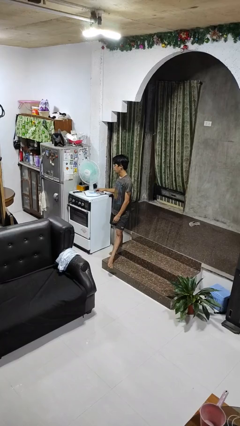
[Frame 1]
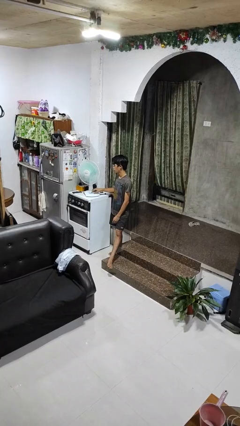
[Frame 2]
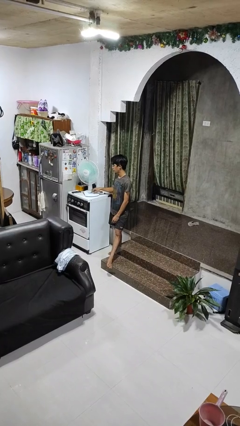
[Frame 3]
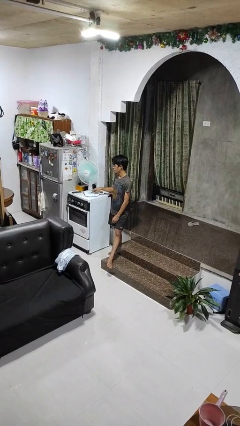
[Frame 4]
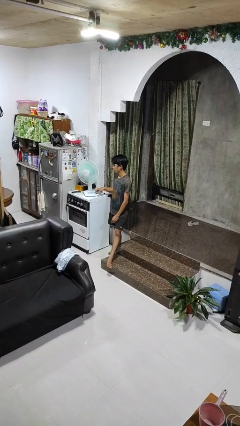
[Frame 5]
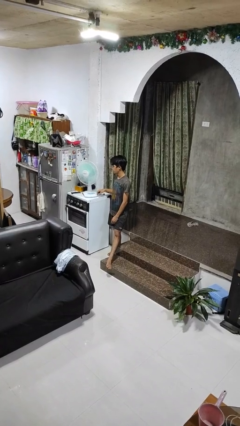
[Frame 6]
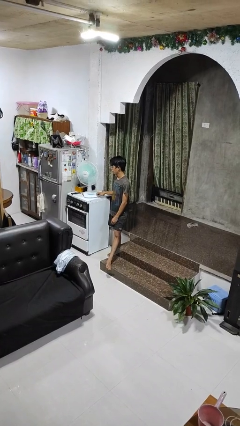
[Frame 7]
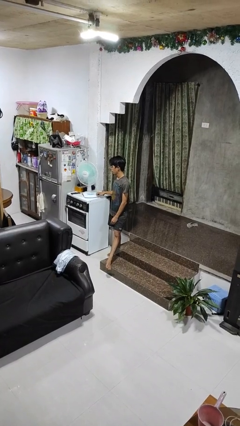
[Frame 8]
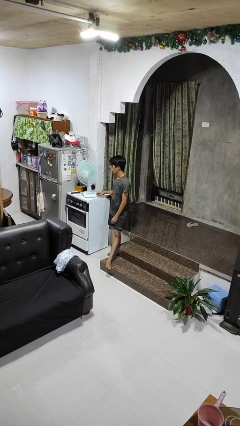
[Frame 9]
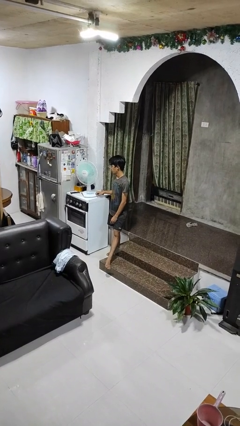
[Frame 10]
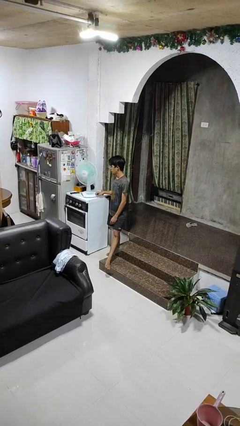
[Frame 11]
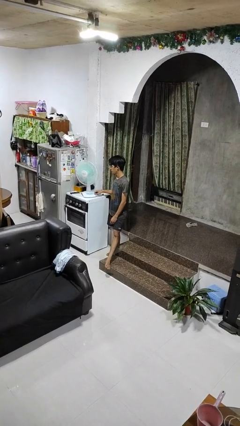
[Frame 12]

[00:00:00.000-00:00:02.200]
person turns on fan

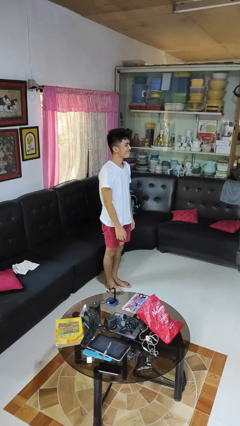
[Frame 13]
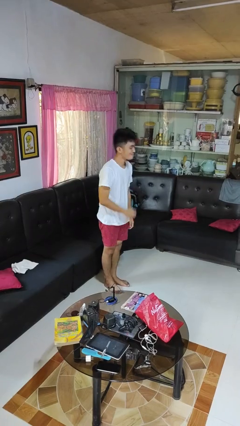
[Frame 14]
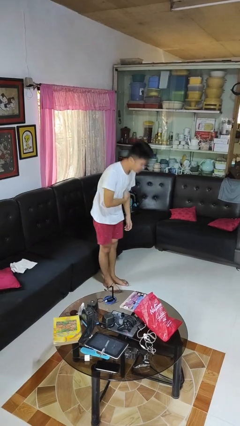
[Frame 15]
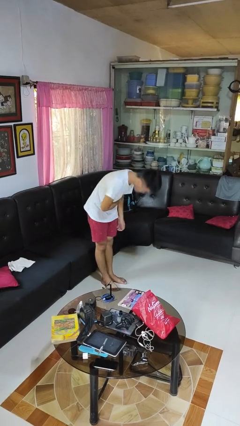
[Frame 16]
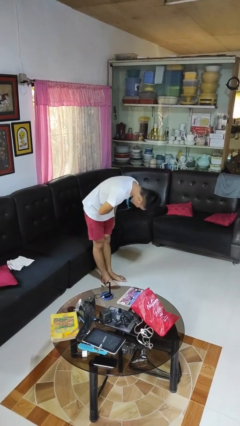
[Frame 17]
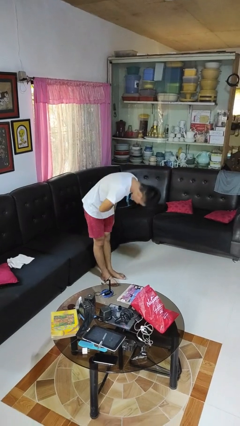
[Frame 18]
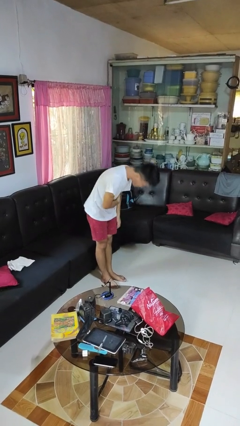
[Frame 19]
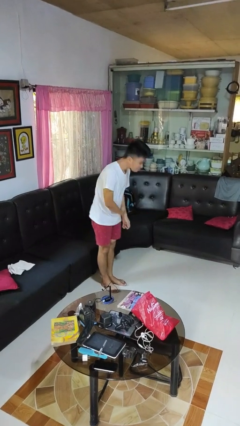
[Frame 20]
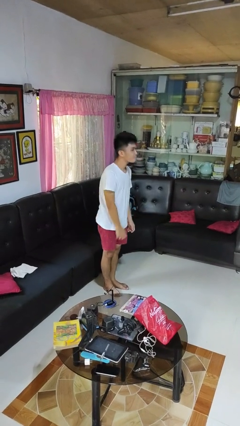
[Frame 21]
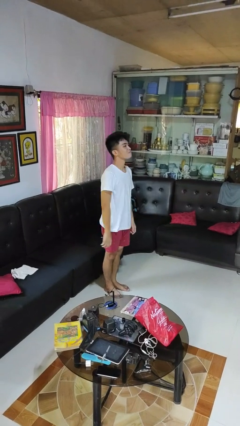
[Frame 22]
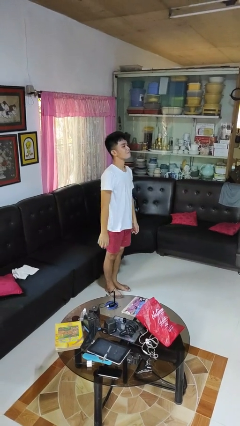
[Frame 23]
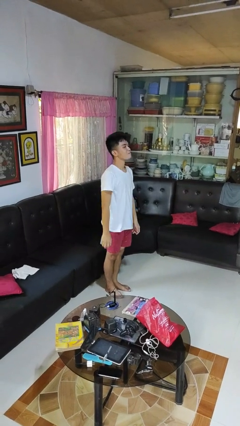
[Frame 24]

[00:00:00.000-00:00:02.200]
person bows

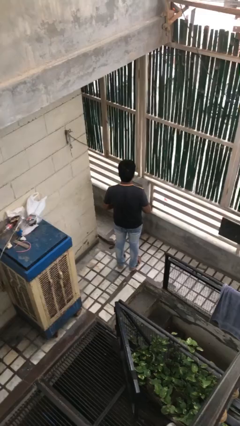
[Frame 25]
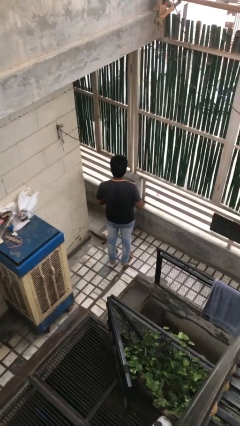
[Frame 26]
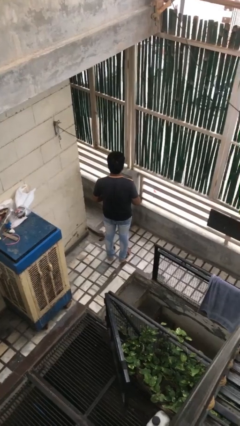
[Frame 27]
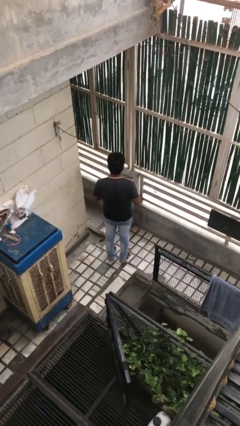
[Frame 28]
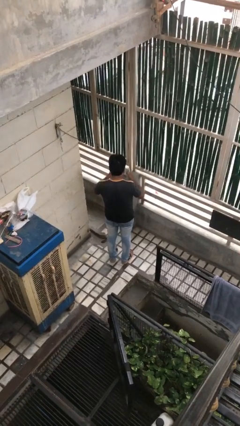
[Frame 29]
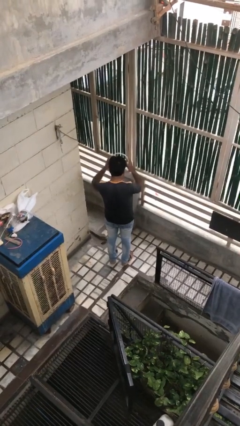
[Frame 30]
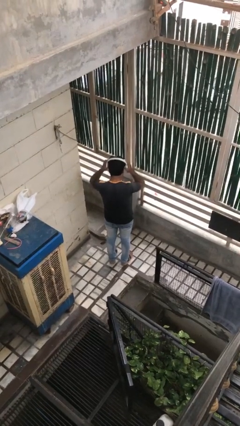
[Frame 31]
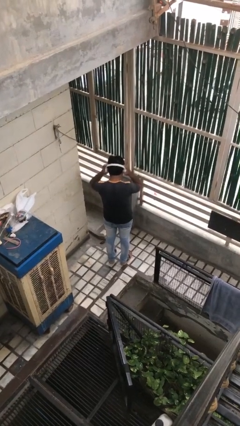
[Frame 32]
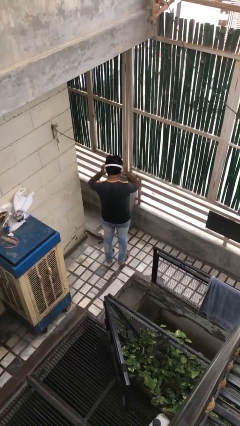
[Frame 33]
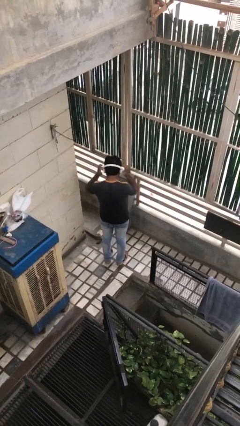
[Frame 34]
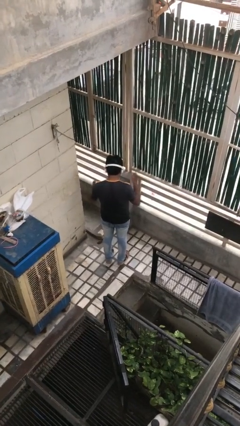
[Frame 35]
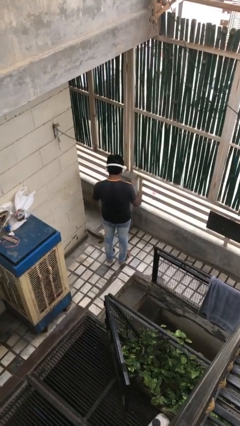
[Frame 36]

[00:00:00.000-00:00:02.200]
person puts on headphones

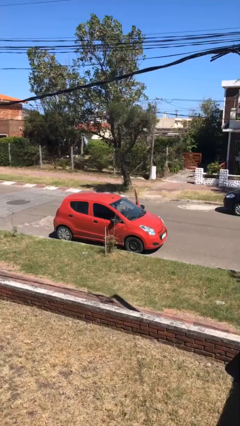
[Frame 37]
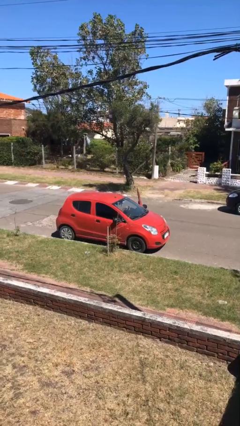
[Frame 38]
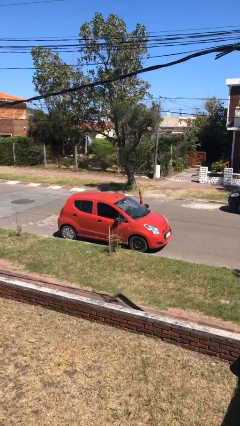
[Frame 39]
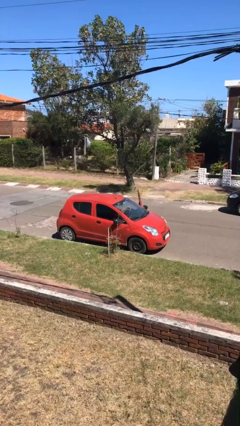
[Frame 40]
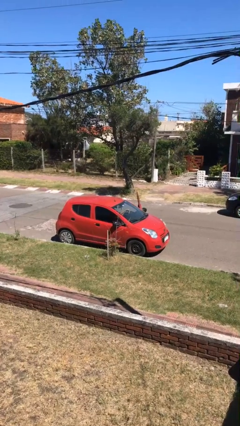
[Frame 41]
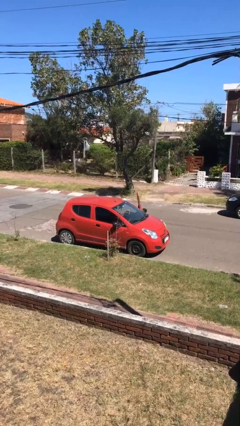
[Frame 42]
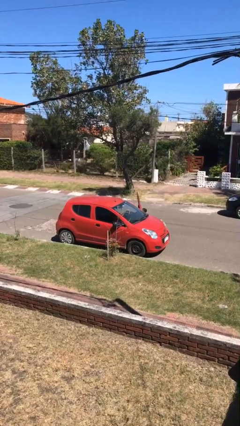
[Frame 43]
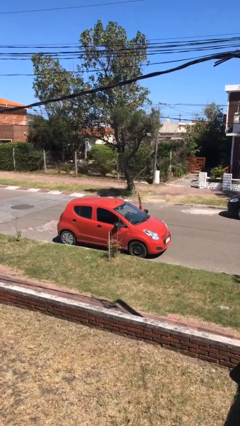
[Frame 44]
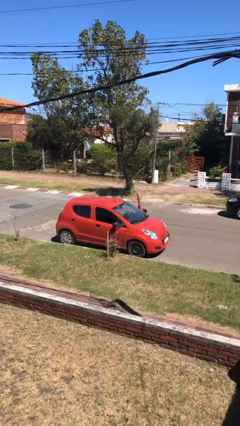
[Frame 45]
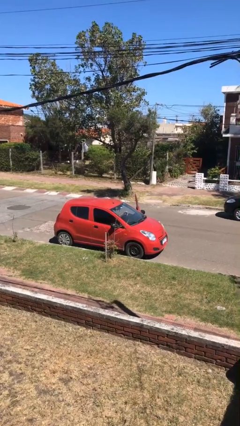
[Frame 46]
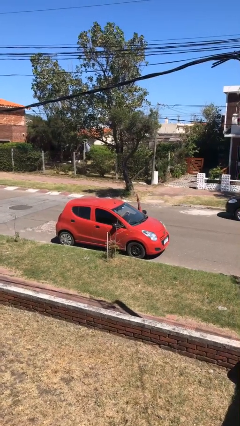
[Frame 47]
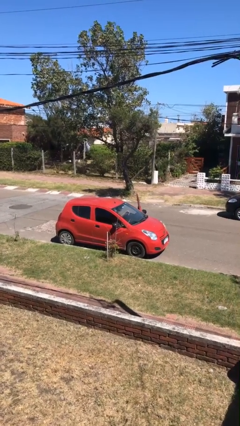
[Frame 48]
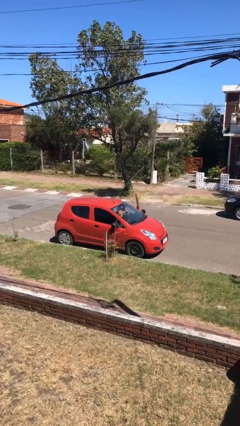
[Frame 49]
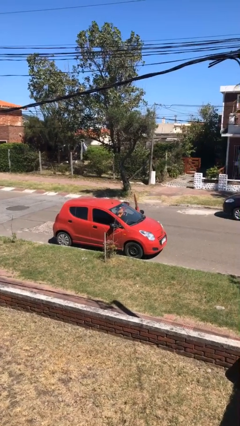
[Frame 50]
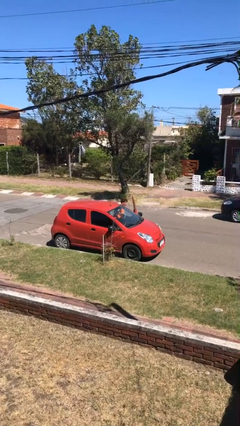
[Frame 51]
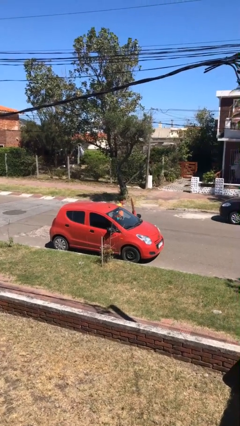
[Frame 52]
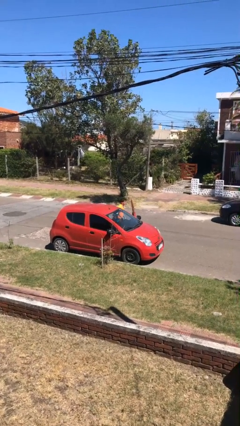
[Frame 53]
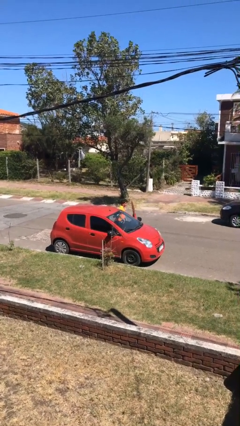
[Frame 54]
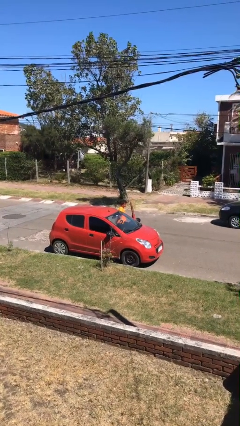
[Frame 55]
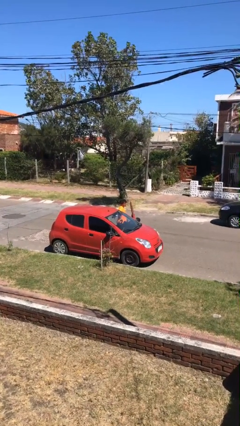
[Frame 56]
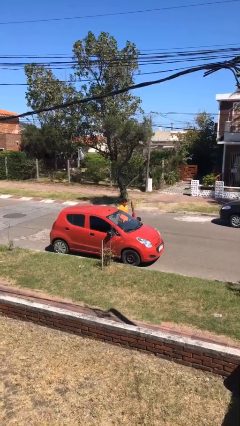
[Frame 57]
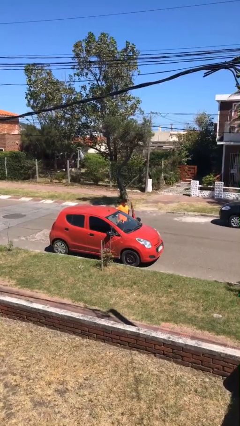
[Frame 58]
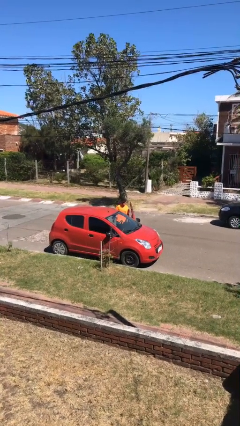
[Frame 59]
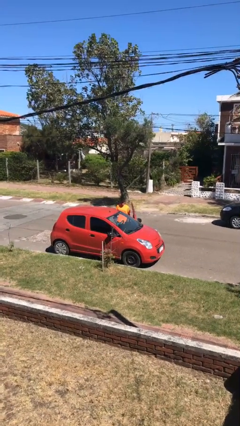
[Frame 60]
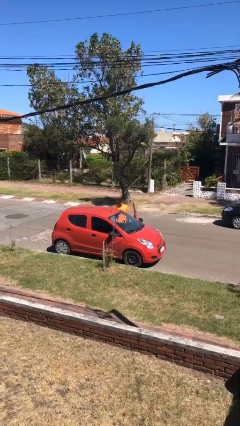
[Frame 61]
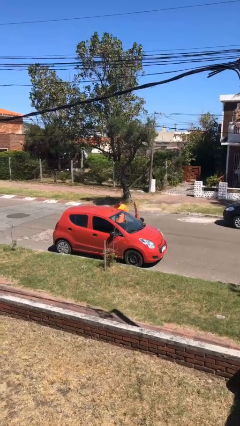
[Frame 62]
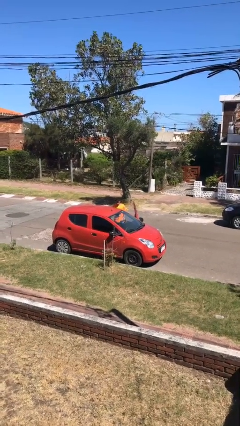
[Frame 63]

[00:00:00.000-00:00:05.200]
person exits car

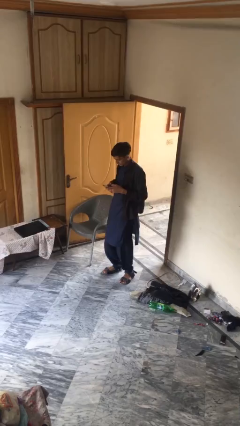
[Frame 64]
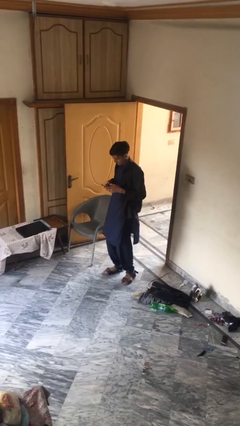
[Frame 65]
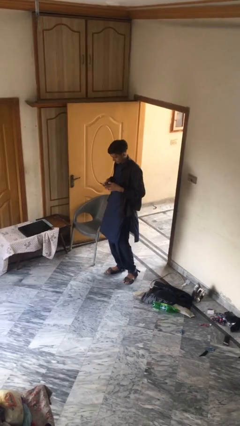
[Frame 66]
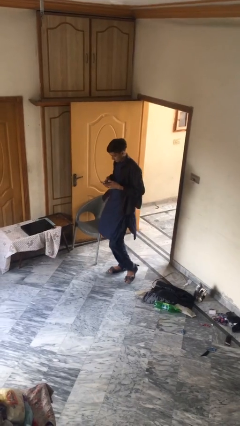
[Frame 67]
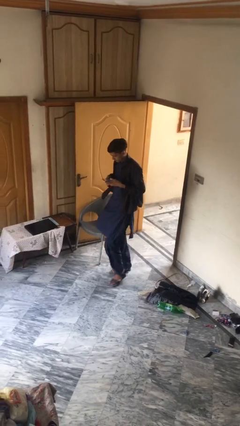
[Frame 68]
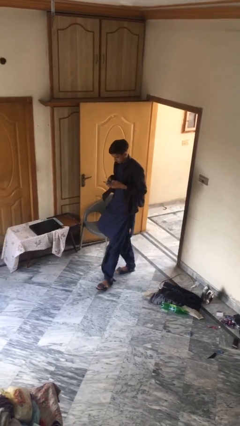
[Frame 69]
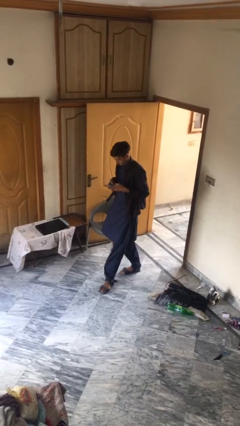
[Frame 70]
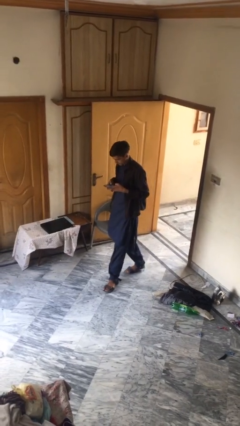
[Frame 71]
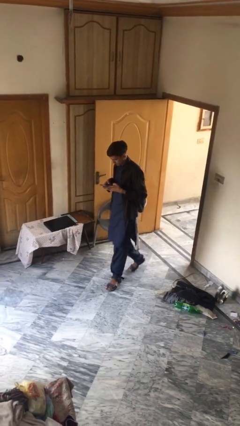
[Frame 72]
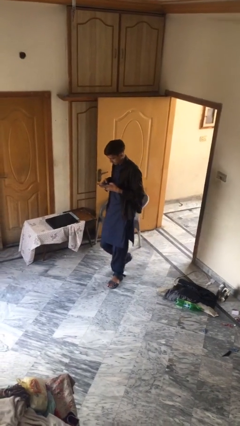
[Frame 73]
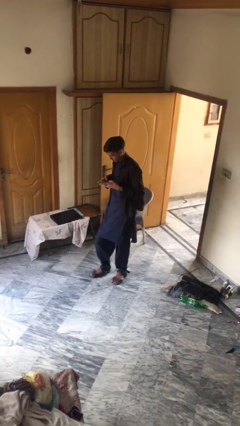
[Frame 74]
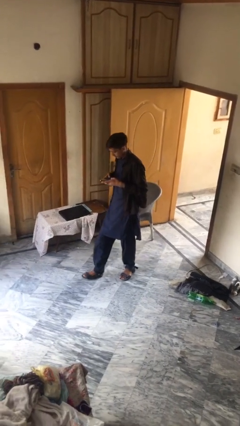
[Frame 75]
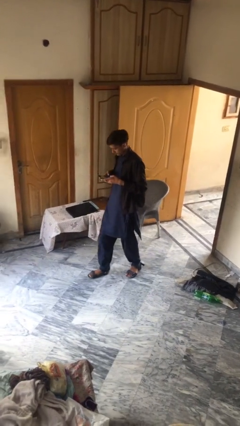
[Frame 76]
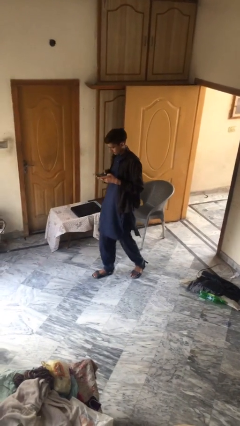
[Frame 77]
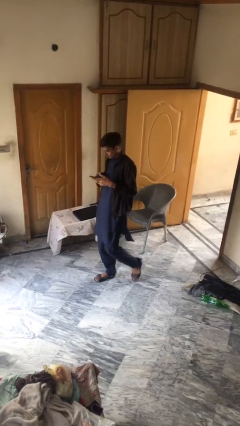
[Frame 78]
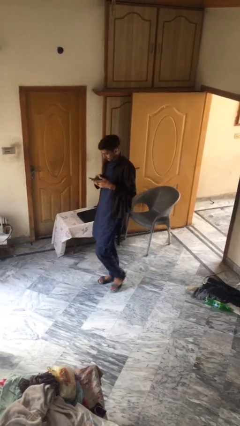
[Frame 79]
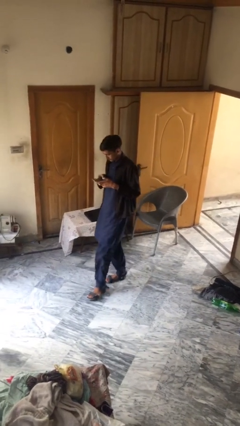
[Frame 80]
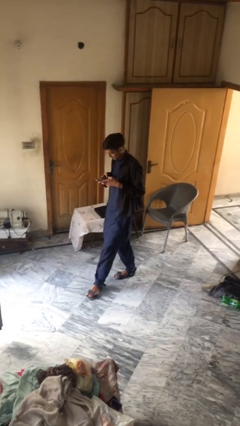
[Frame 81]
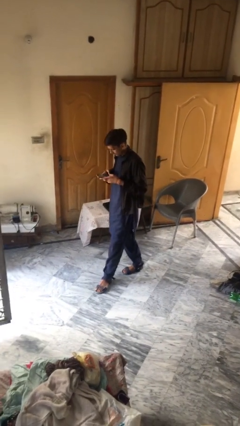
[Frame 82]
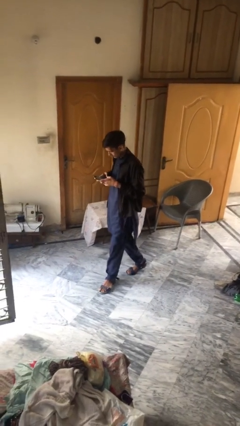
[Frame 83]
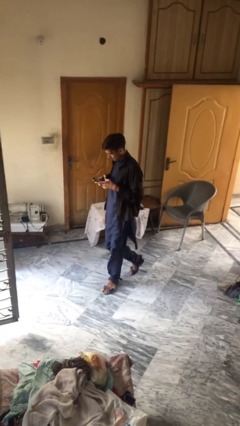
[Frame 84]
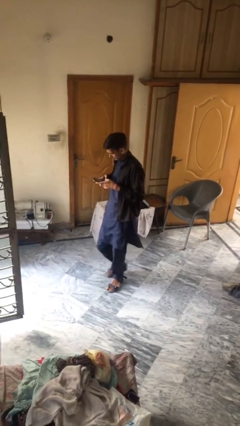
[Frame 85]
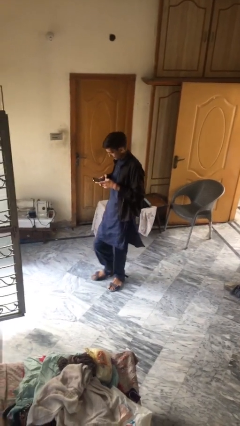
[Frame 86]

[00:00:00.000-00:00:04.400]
person texts on phone

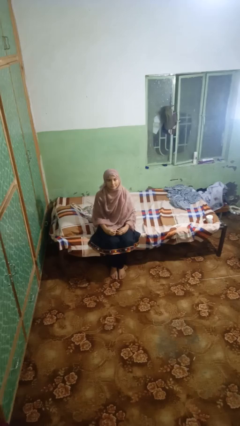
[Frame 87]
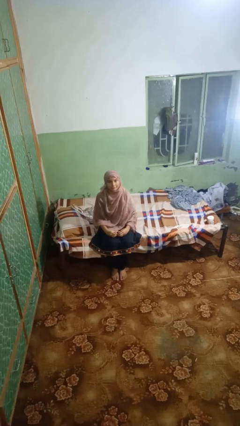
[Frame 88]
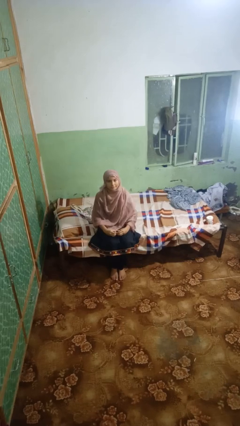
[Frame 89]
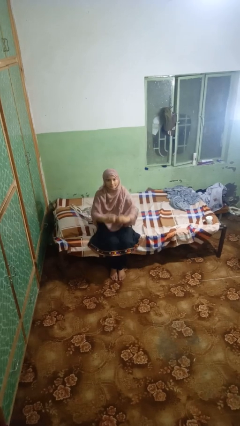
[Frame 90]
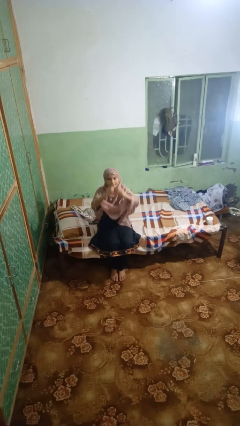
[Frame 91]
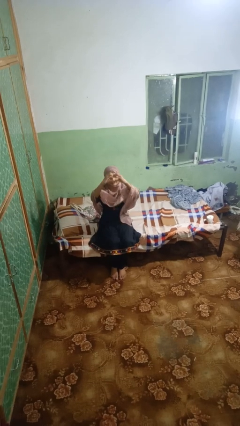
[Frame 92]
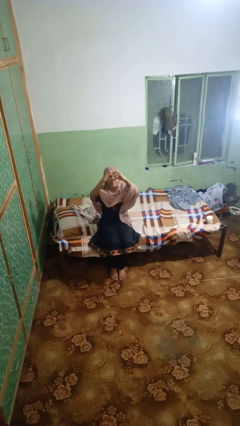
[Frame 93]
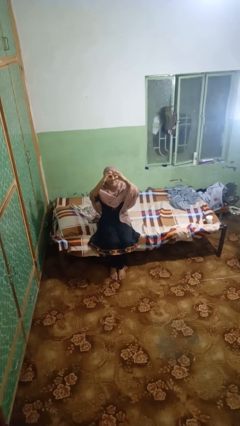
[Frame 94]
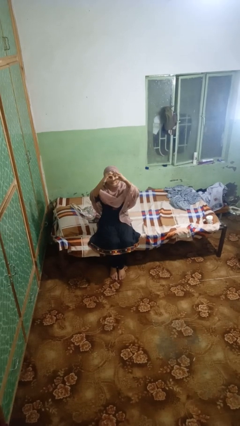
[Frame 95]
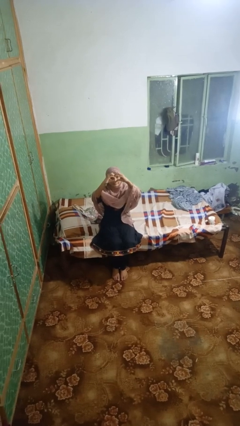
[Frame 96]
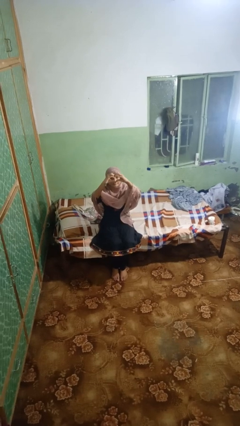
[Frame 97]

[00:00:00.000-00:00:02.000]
person gestures heart
